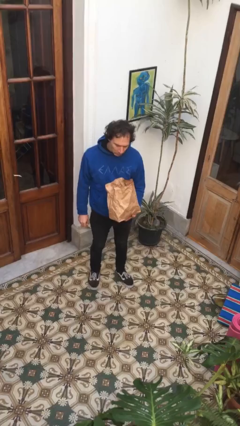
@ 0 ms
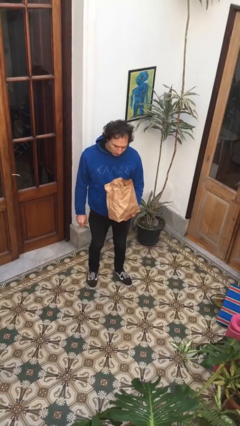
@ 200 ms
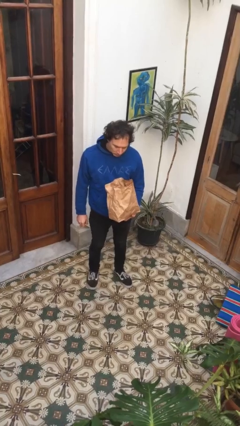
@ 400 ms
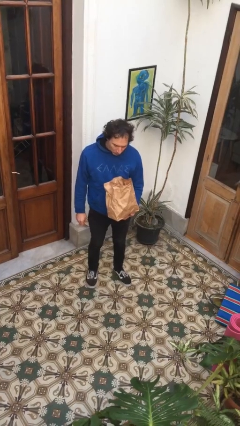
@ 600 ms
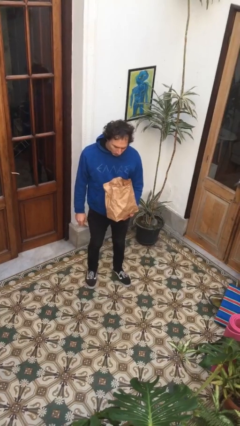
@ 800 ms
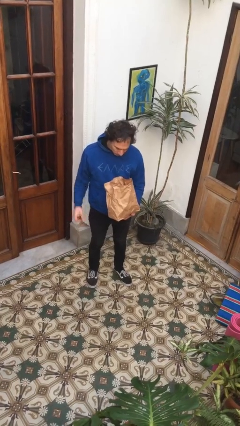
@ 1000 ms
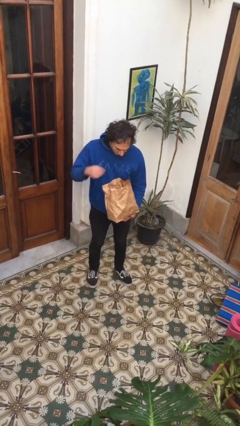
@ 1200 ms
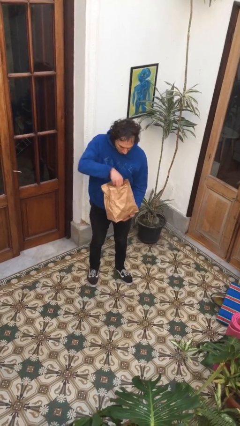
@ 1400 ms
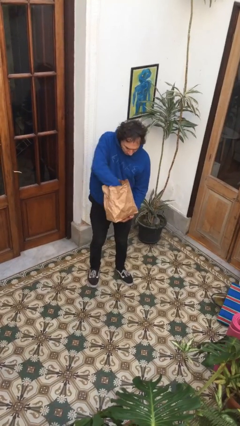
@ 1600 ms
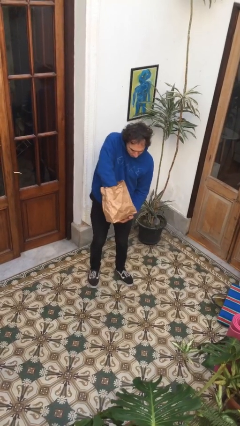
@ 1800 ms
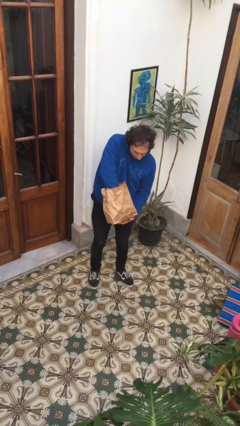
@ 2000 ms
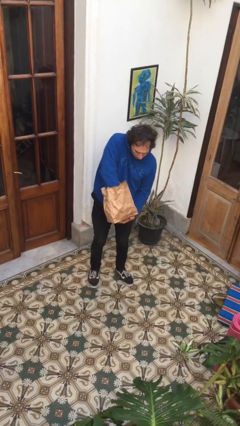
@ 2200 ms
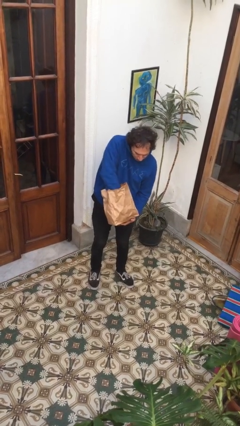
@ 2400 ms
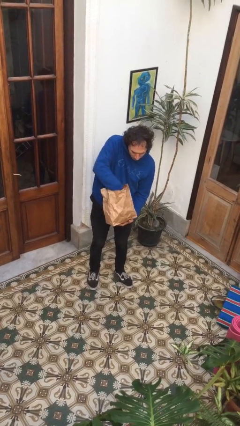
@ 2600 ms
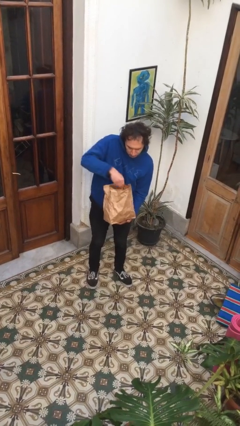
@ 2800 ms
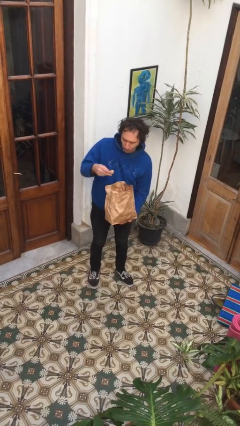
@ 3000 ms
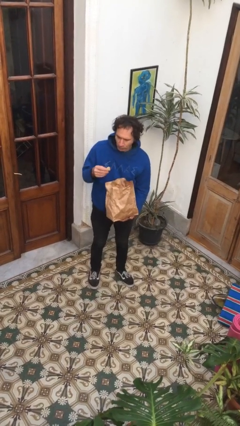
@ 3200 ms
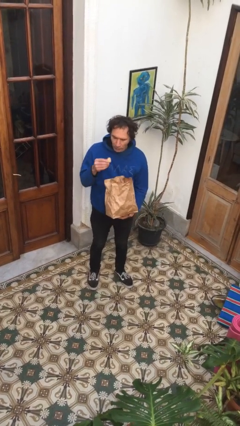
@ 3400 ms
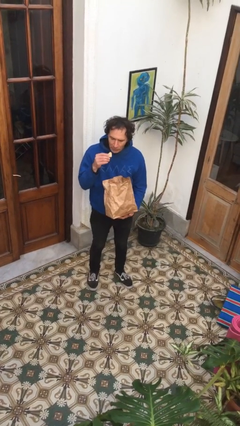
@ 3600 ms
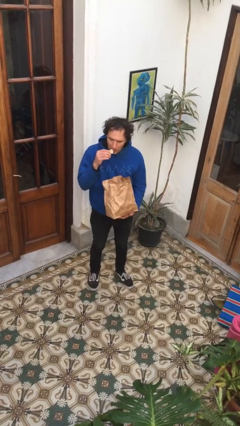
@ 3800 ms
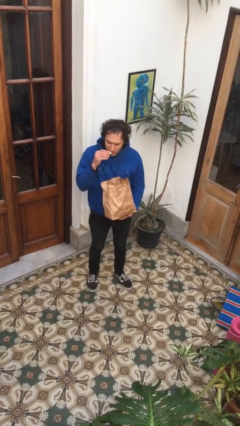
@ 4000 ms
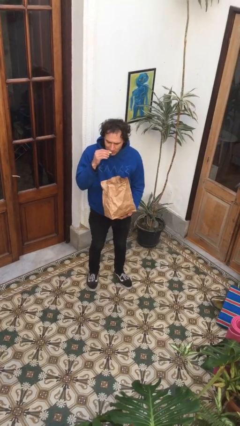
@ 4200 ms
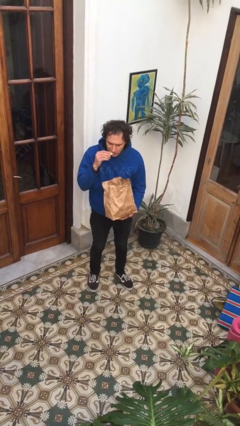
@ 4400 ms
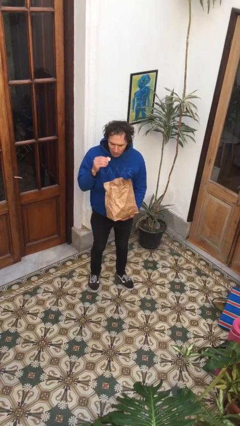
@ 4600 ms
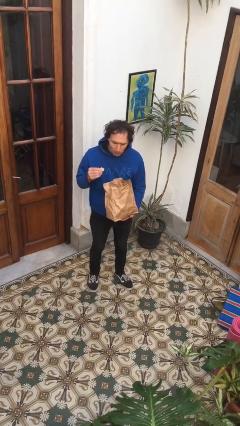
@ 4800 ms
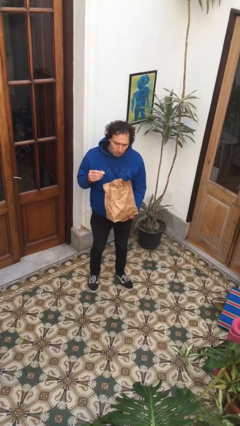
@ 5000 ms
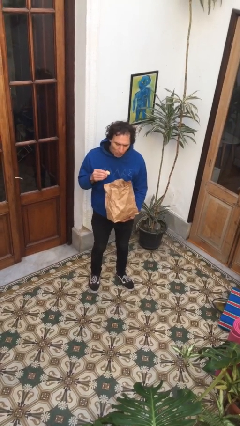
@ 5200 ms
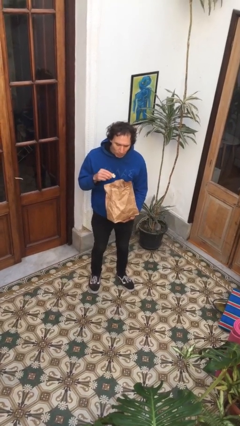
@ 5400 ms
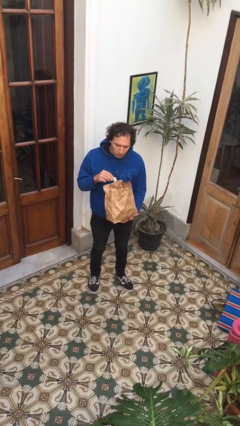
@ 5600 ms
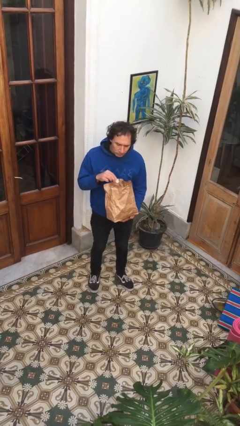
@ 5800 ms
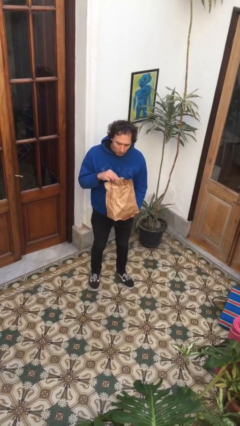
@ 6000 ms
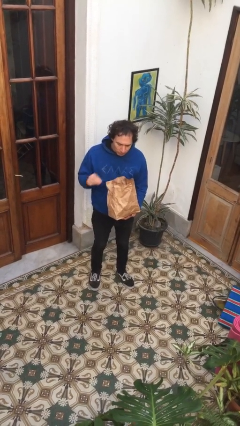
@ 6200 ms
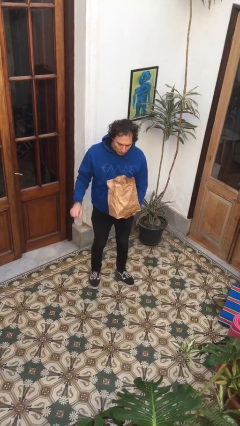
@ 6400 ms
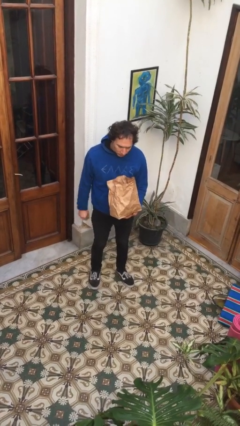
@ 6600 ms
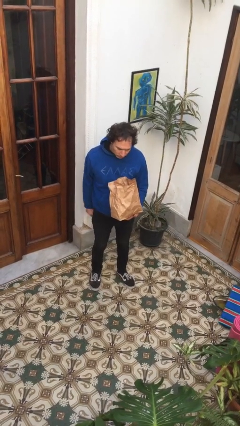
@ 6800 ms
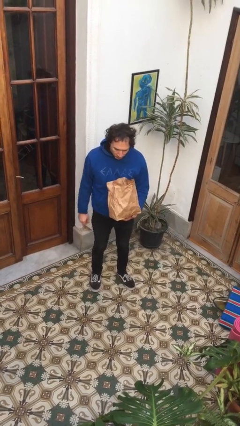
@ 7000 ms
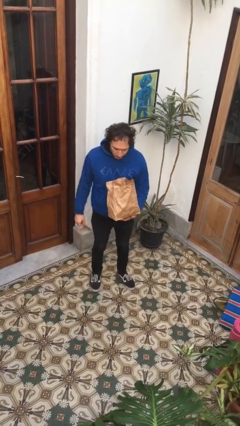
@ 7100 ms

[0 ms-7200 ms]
person eats snack from bag

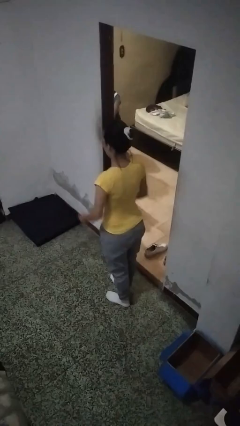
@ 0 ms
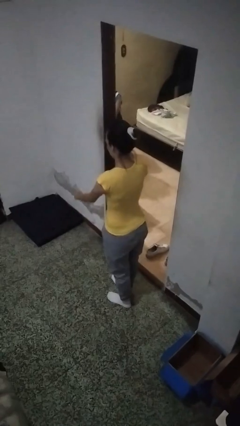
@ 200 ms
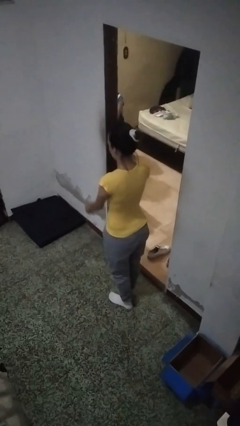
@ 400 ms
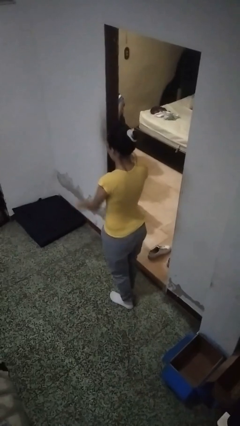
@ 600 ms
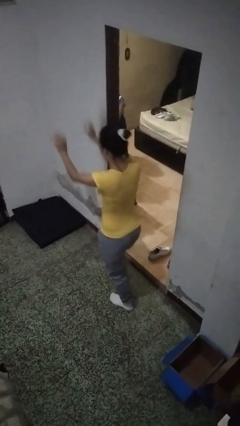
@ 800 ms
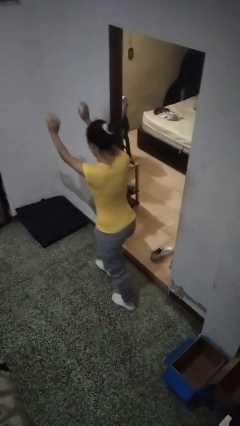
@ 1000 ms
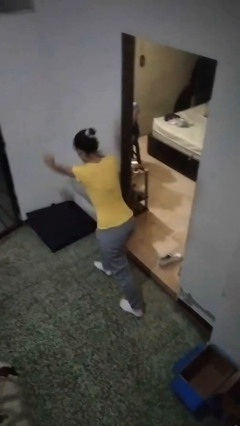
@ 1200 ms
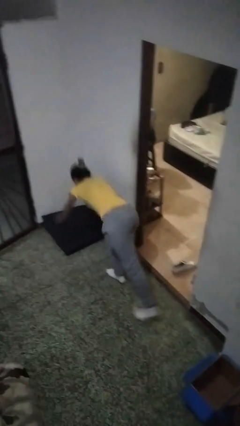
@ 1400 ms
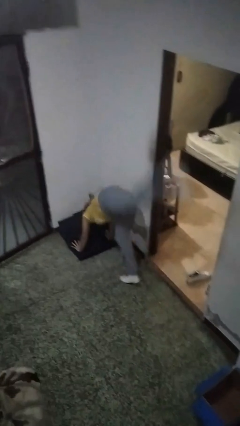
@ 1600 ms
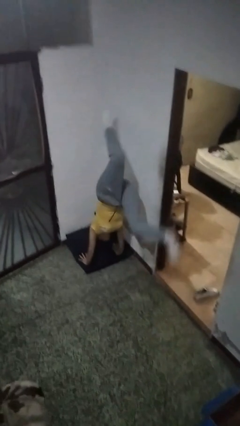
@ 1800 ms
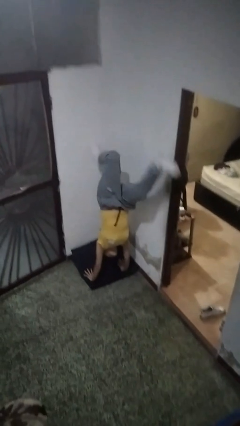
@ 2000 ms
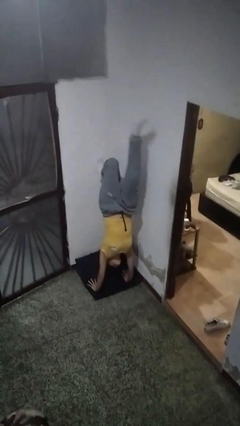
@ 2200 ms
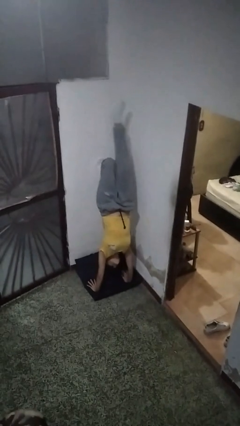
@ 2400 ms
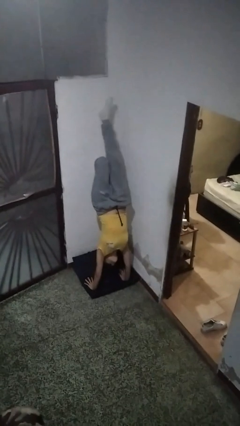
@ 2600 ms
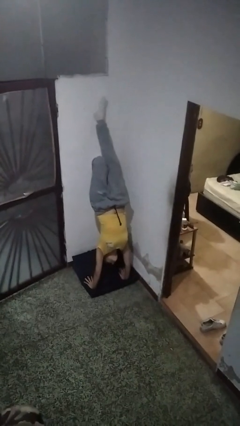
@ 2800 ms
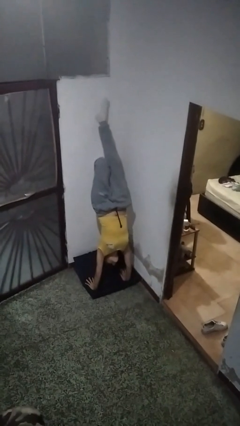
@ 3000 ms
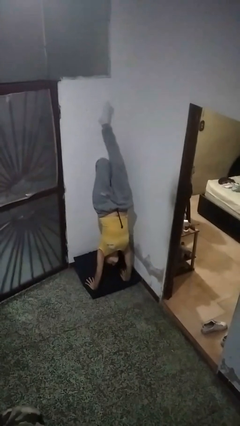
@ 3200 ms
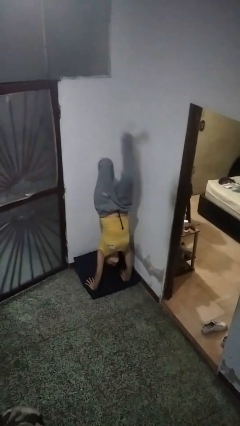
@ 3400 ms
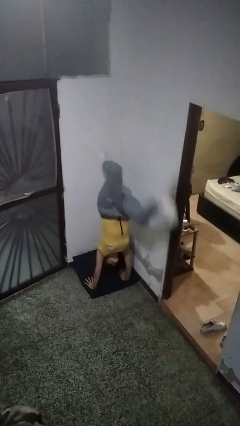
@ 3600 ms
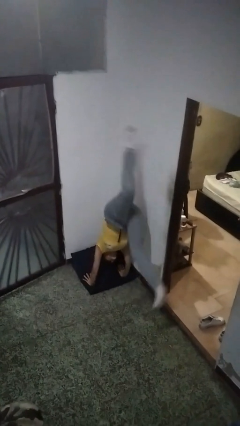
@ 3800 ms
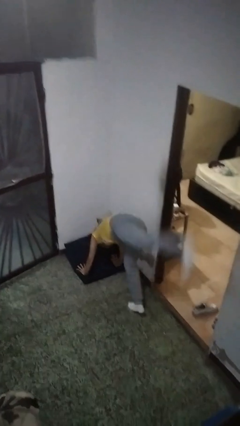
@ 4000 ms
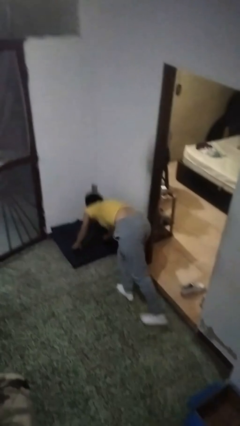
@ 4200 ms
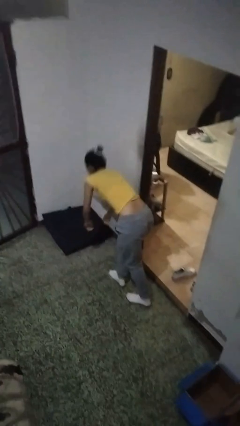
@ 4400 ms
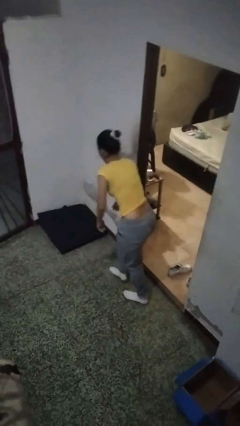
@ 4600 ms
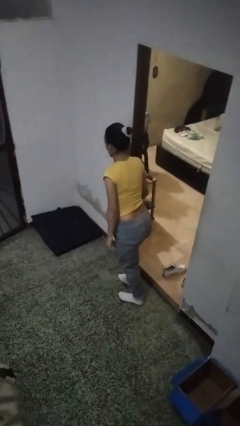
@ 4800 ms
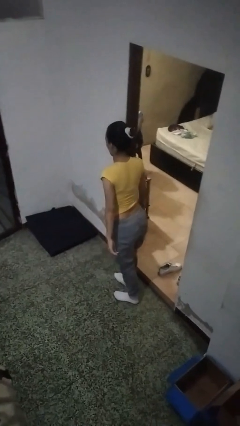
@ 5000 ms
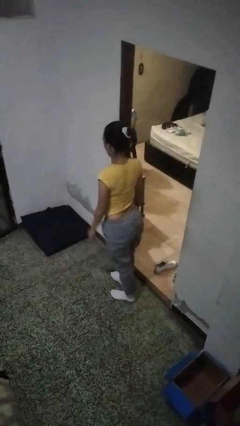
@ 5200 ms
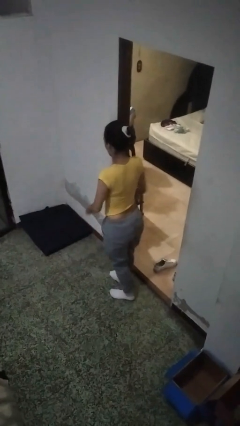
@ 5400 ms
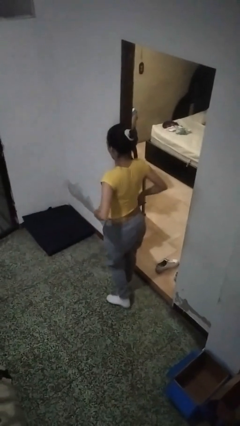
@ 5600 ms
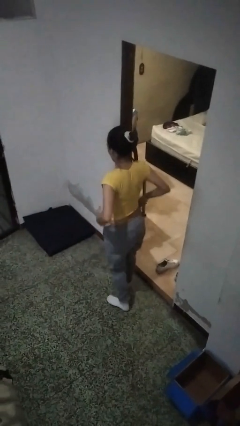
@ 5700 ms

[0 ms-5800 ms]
person handstand

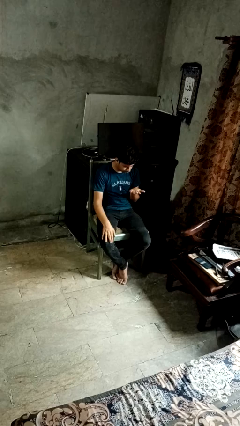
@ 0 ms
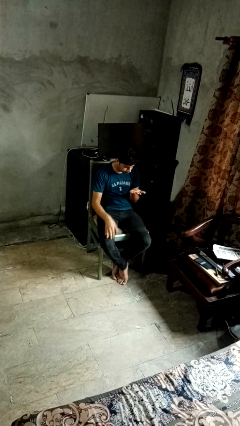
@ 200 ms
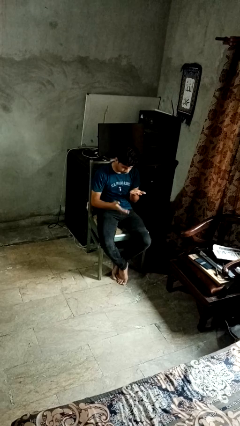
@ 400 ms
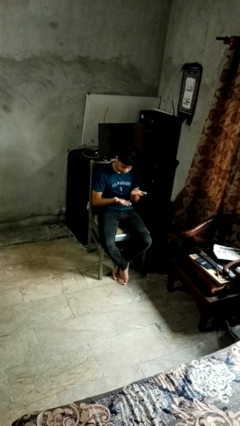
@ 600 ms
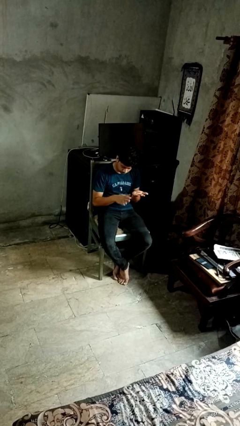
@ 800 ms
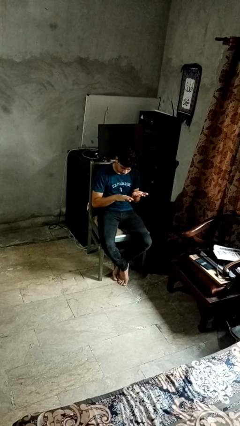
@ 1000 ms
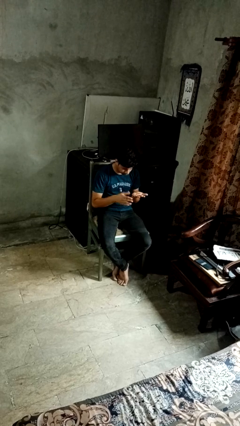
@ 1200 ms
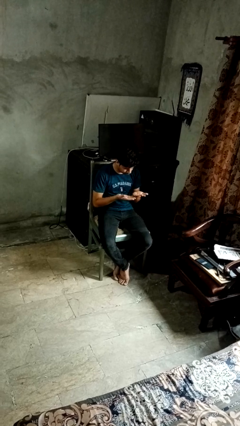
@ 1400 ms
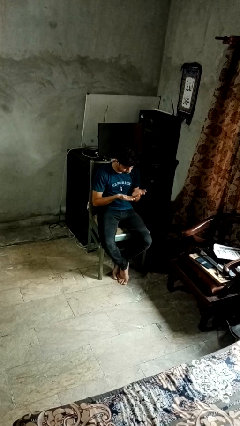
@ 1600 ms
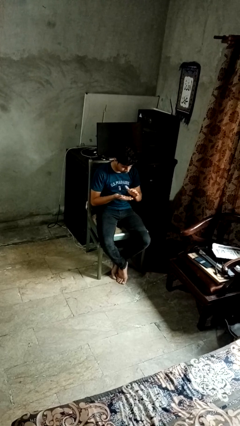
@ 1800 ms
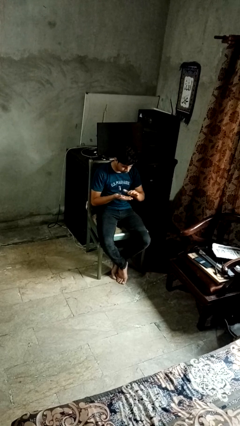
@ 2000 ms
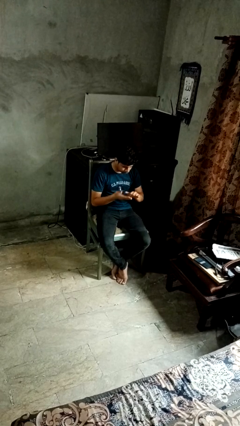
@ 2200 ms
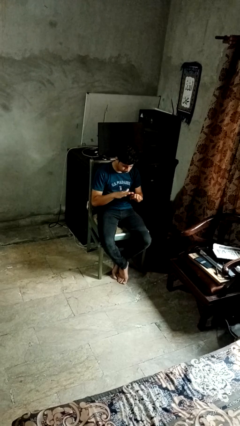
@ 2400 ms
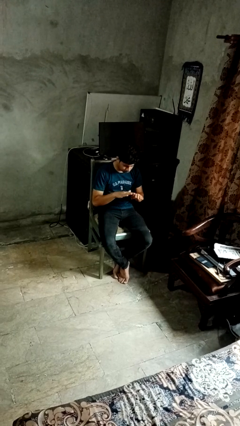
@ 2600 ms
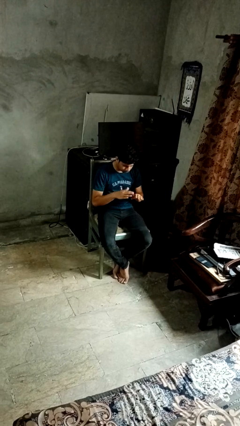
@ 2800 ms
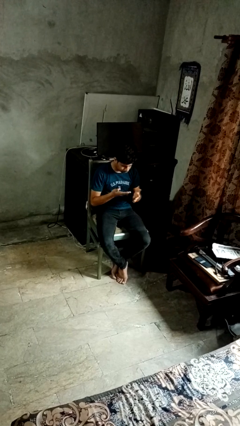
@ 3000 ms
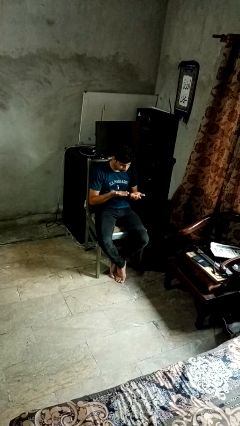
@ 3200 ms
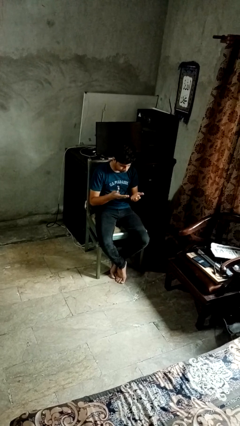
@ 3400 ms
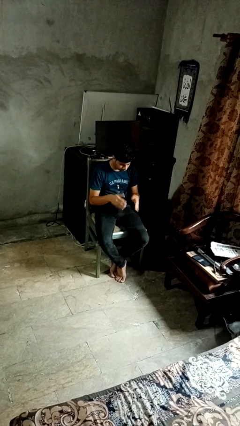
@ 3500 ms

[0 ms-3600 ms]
person looks at hands in lap

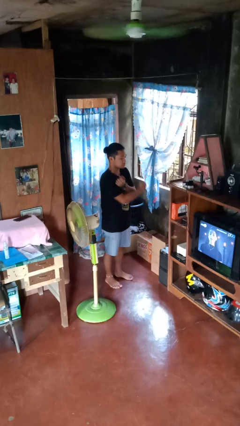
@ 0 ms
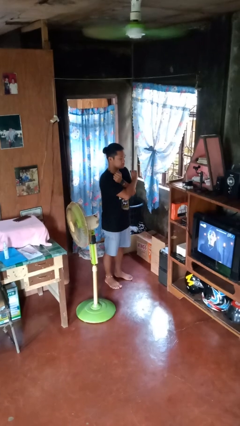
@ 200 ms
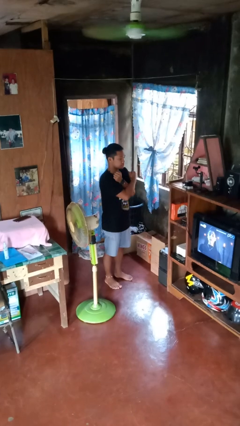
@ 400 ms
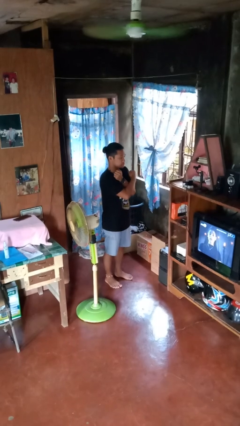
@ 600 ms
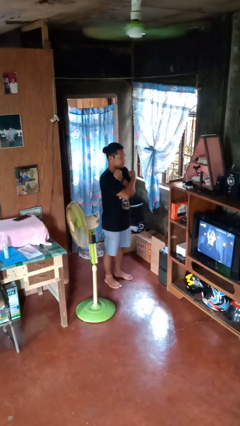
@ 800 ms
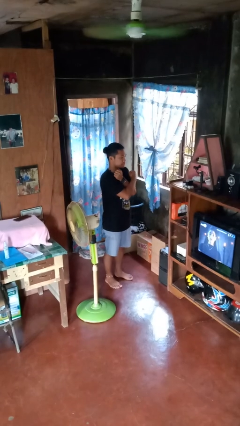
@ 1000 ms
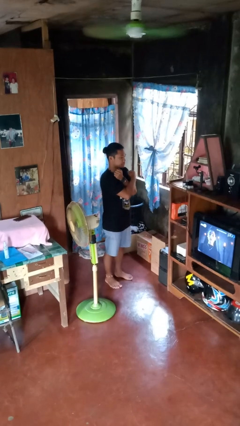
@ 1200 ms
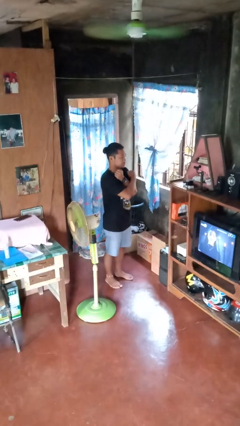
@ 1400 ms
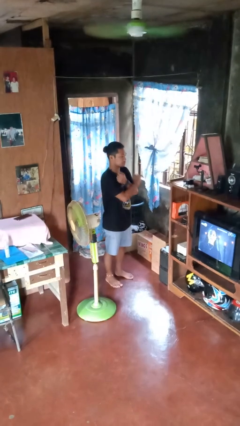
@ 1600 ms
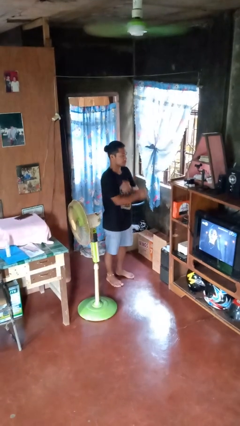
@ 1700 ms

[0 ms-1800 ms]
person gestures arms x
